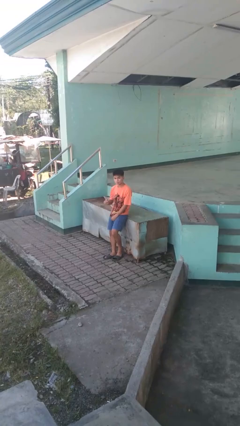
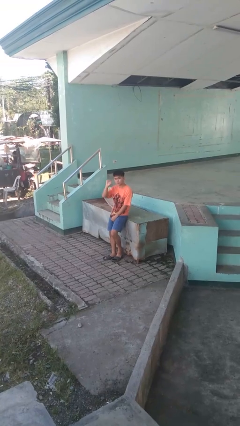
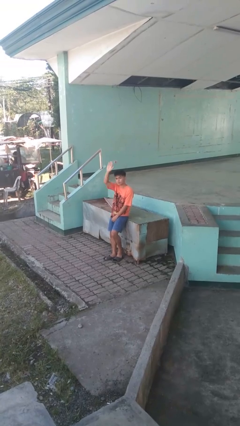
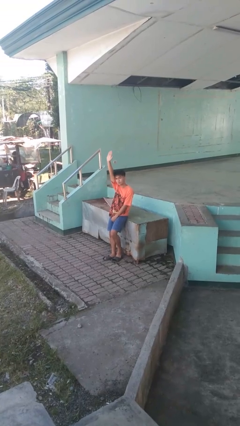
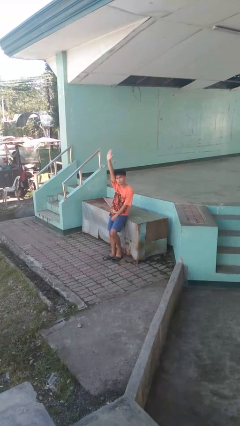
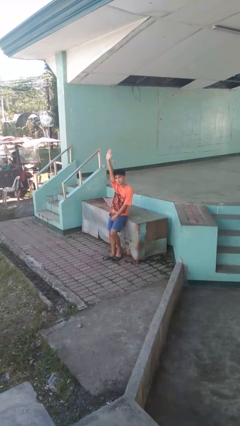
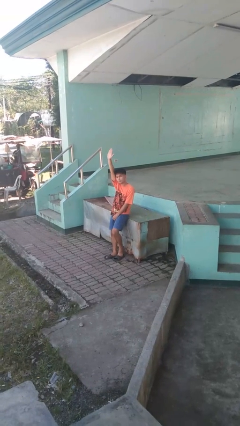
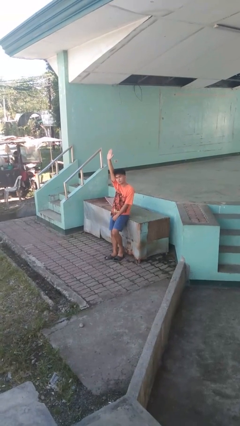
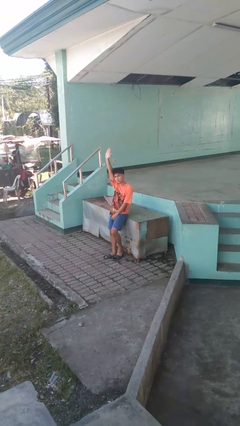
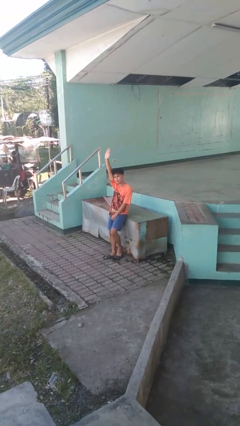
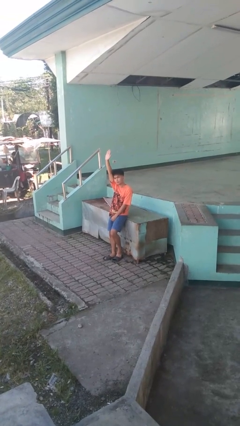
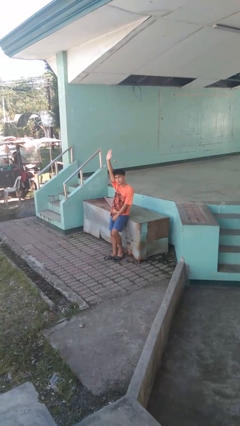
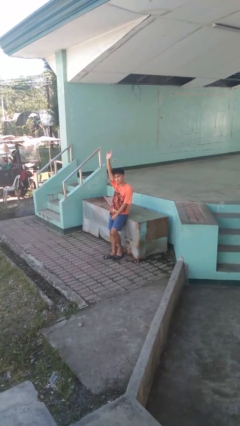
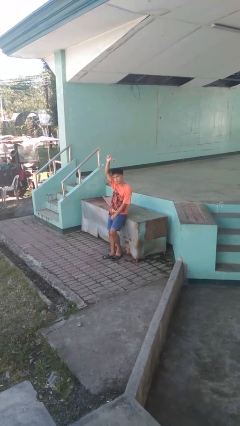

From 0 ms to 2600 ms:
person gestures raise hand

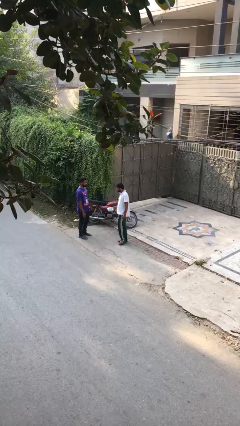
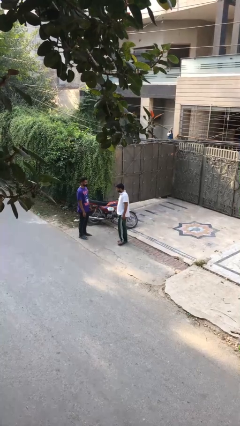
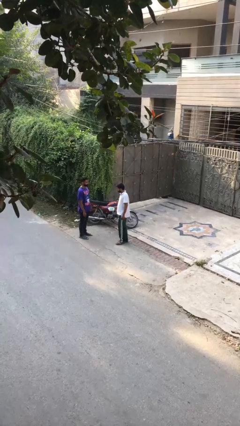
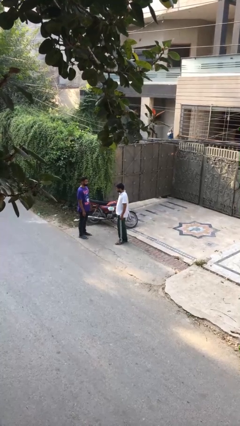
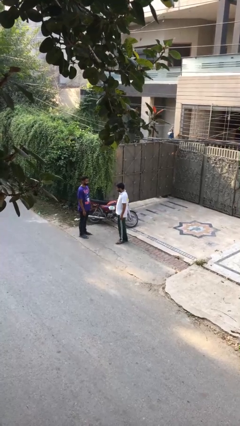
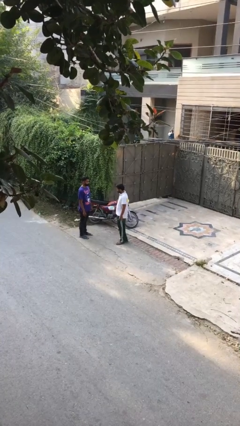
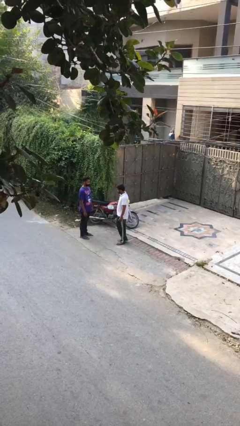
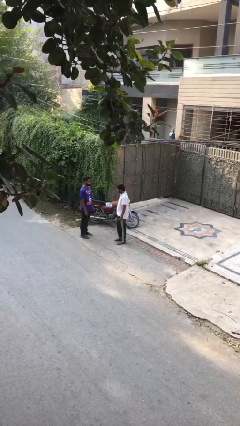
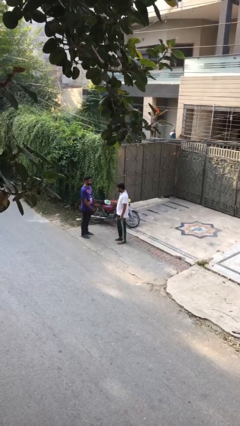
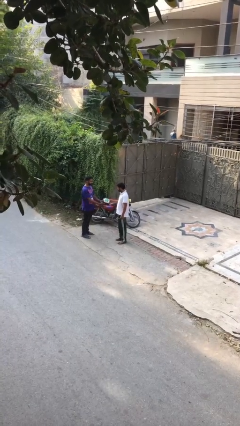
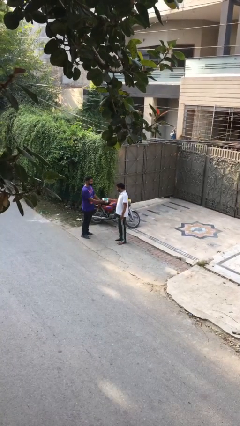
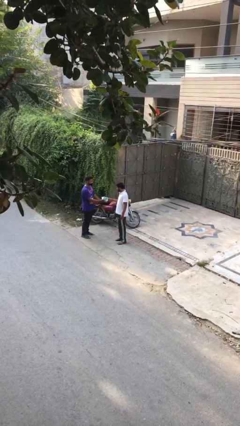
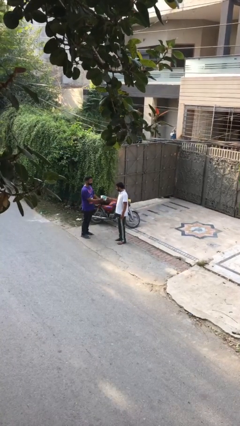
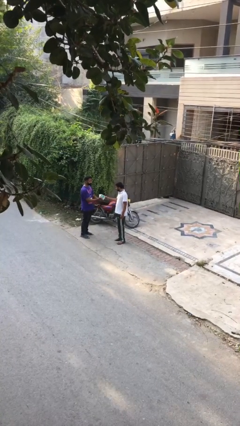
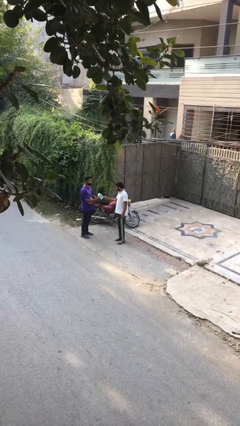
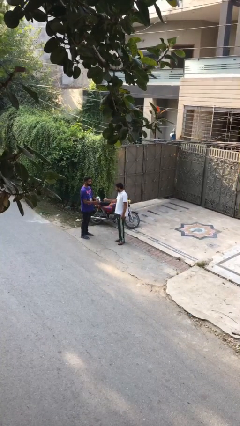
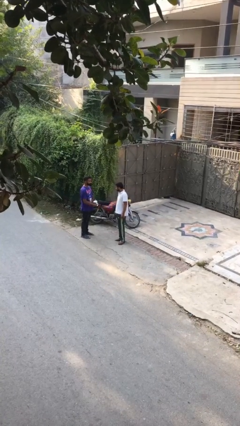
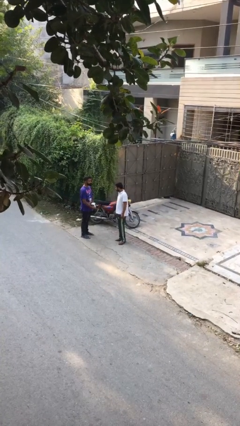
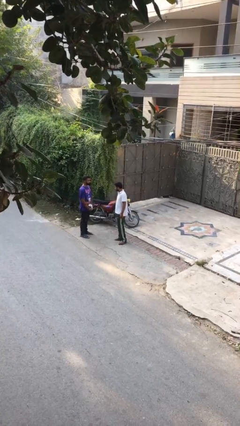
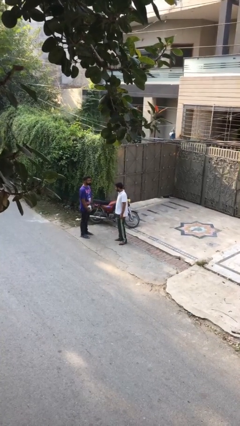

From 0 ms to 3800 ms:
person transfers object to person

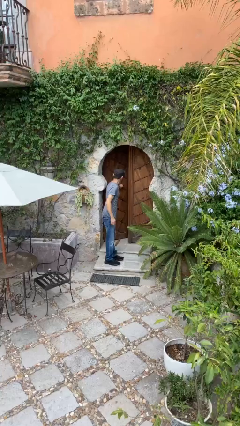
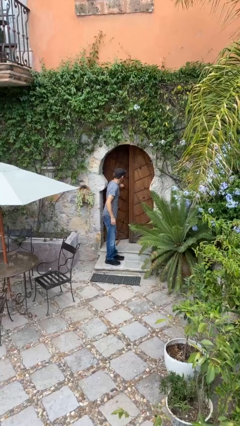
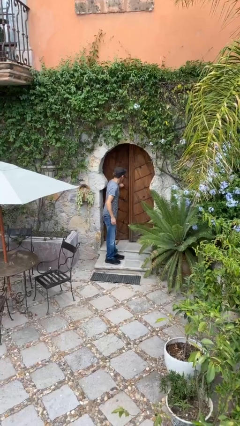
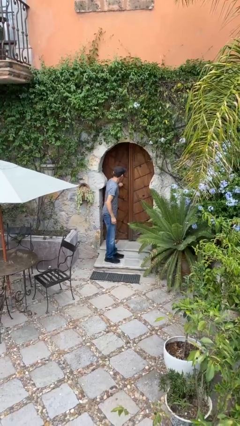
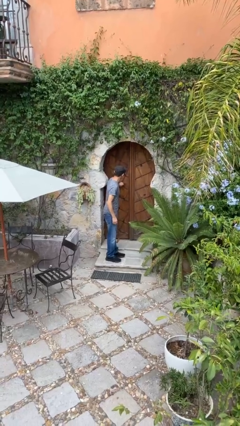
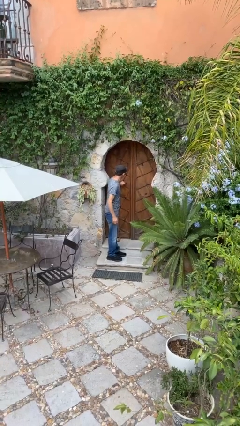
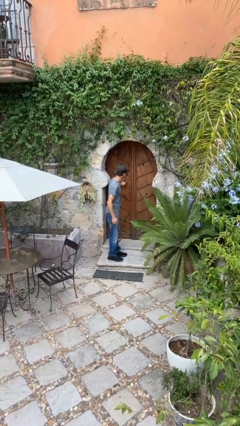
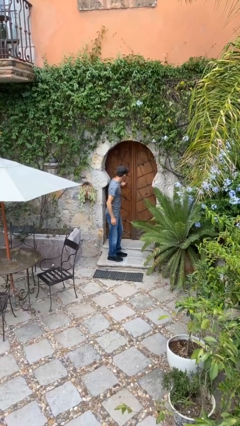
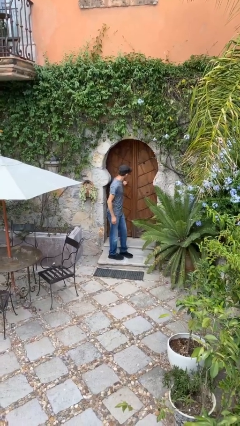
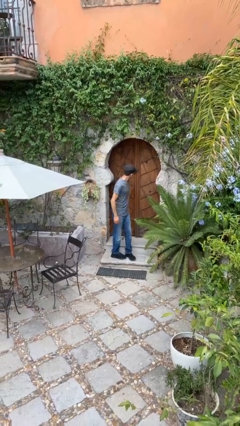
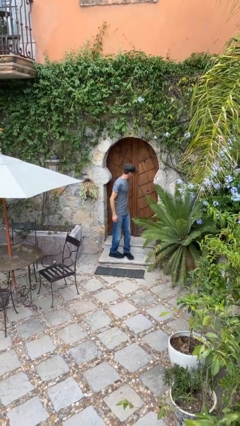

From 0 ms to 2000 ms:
person closes facility door

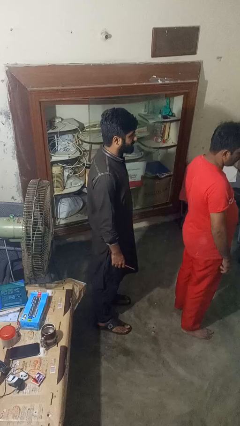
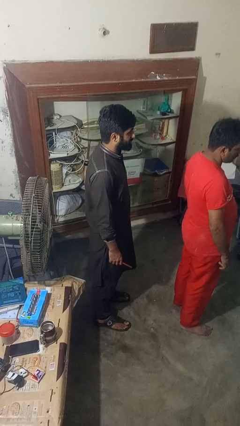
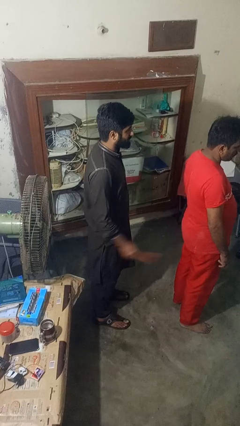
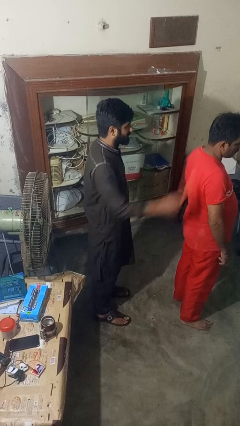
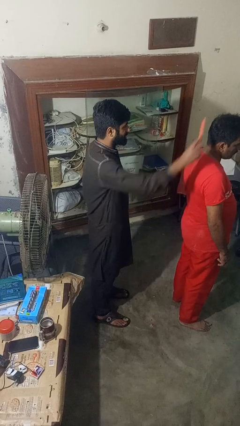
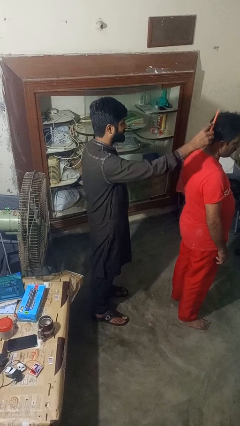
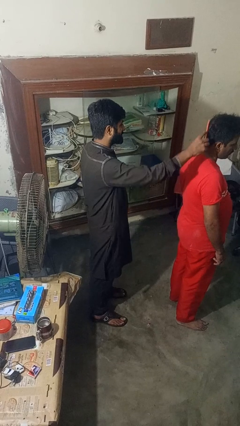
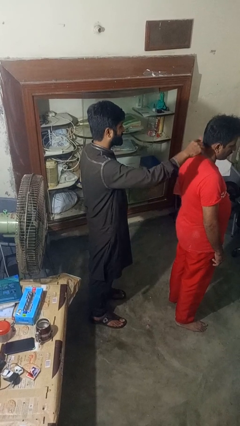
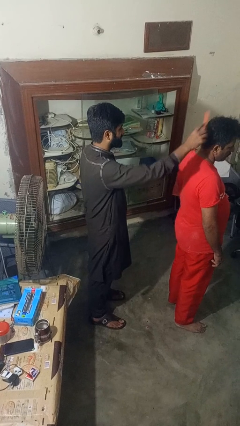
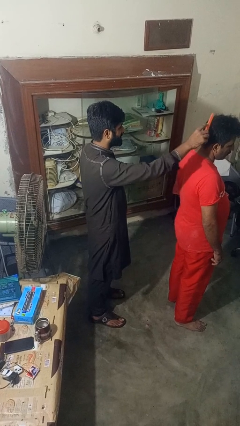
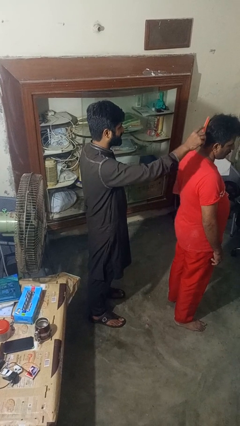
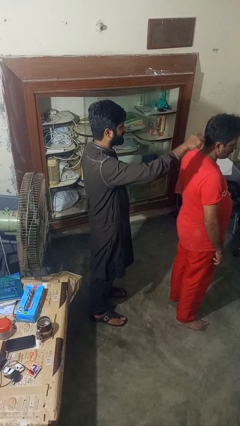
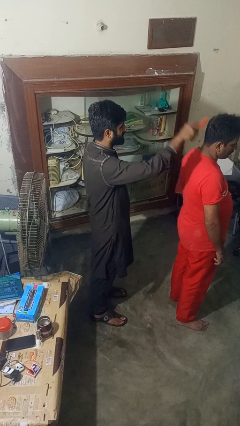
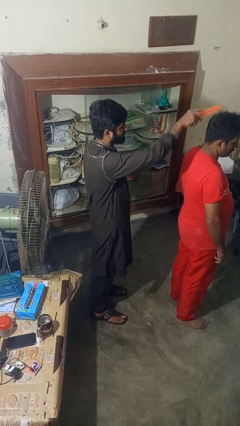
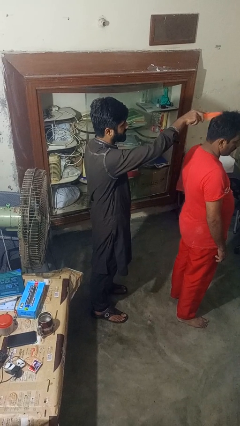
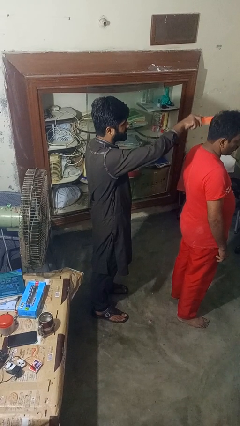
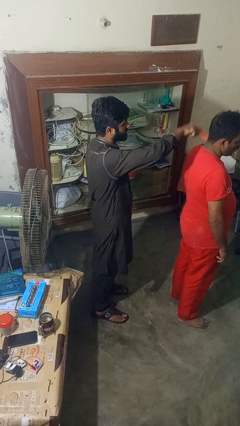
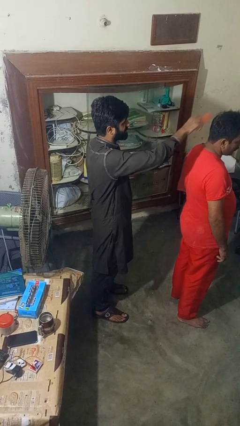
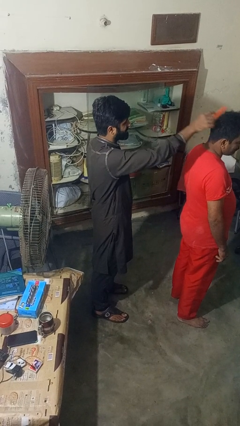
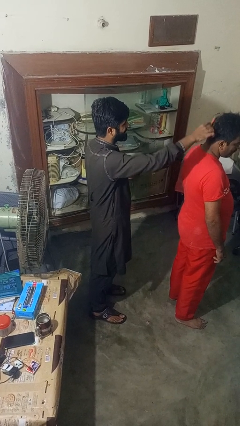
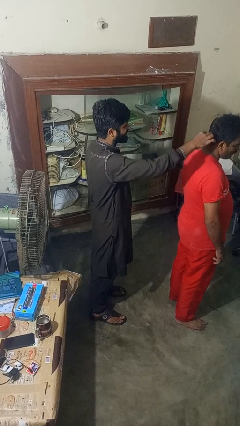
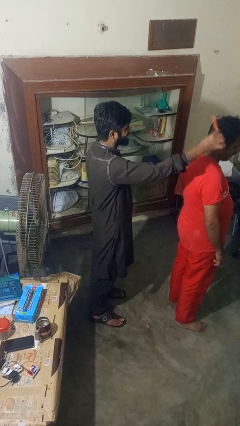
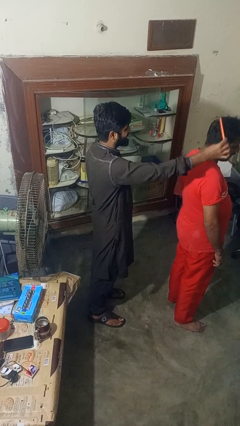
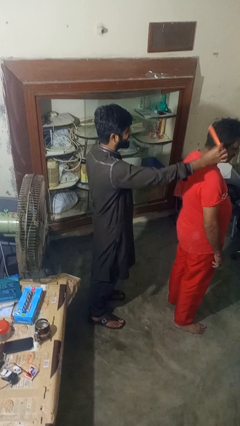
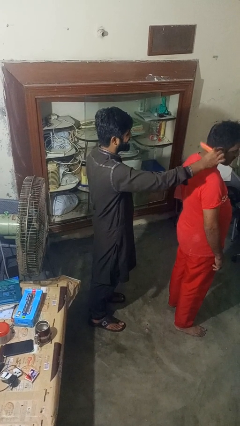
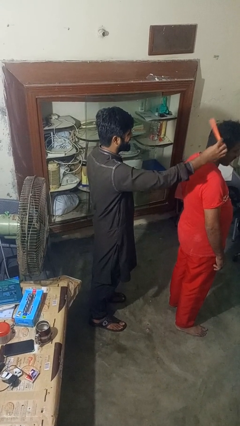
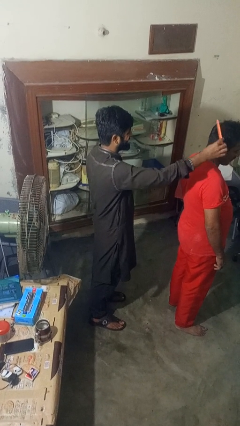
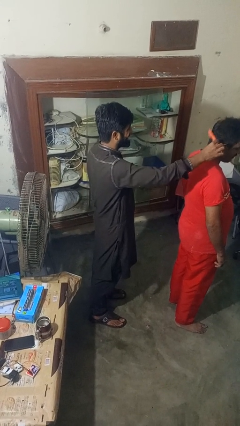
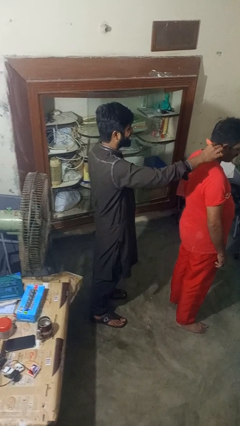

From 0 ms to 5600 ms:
person brushes hair of person

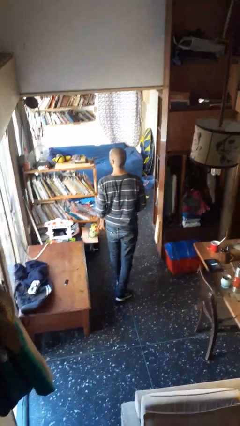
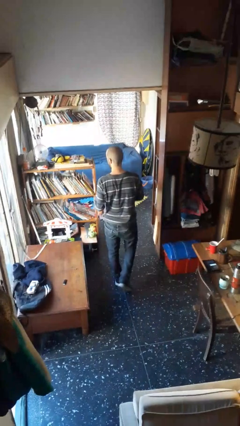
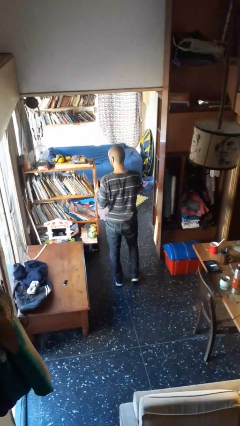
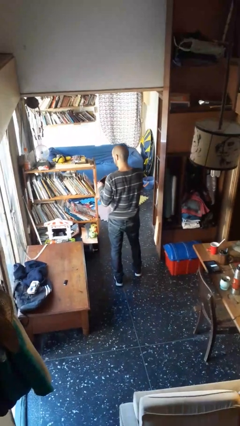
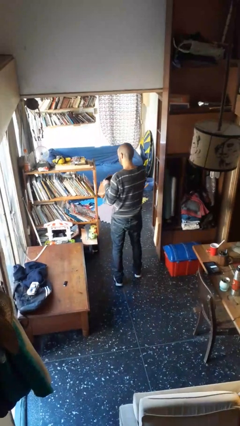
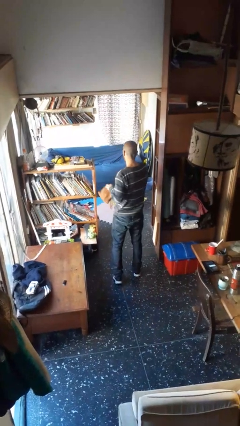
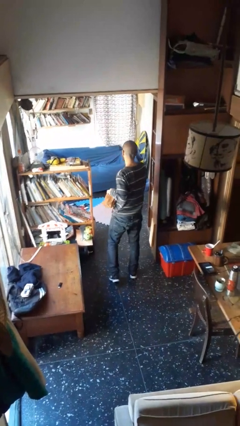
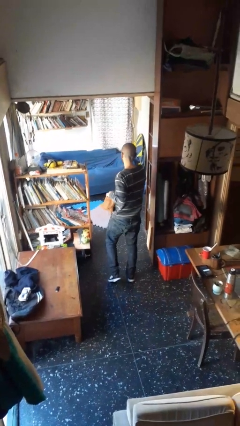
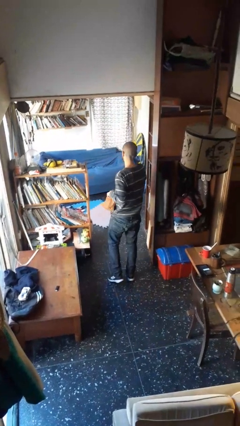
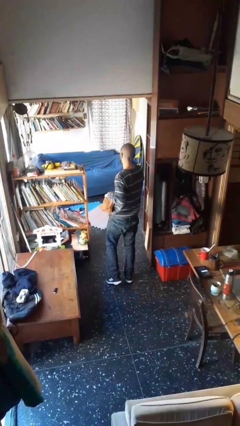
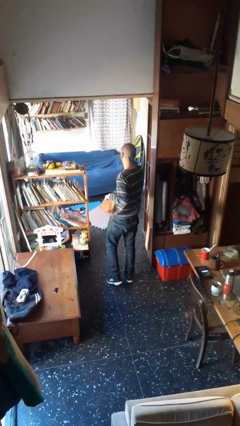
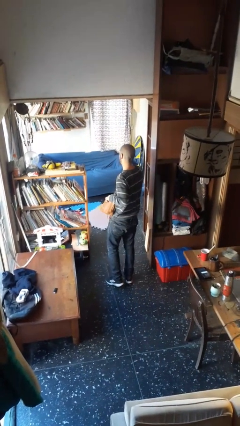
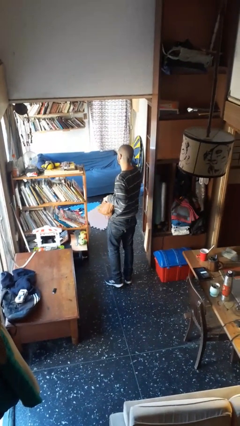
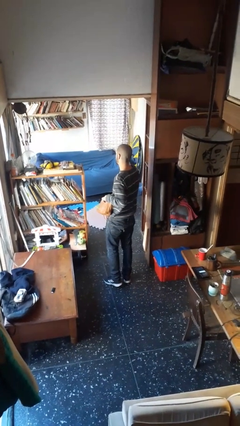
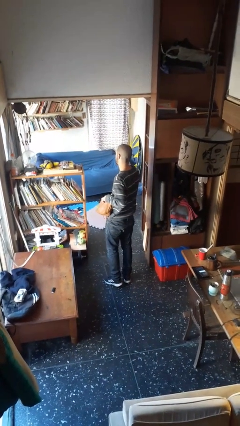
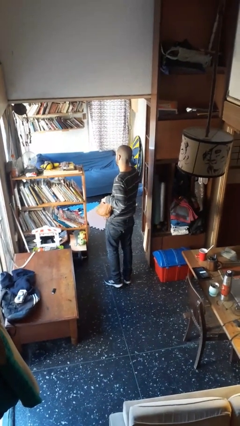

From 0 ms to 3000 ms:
person searches in purse

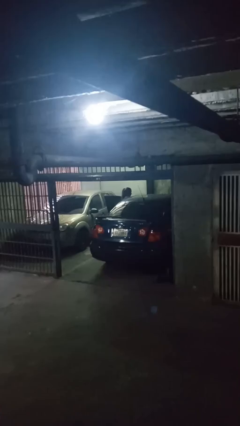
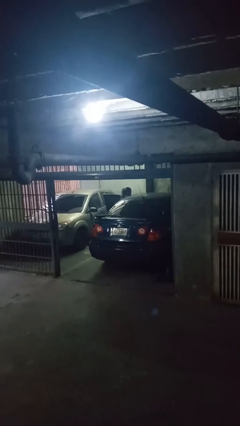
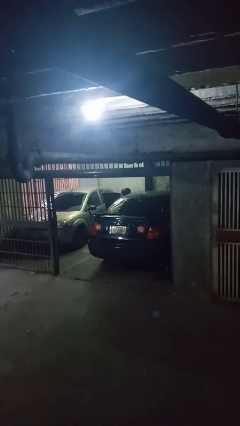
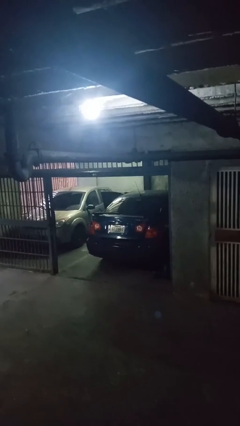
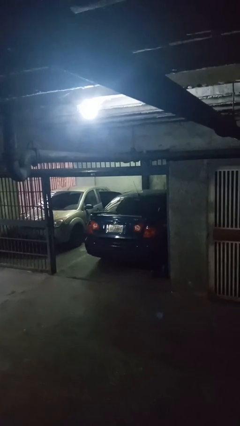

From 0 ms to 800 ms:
person enters car
